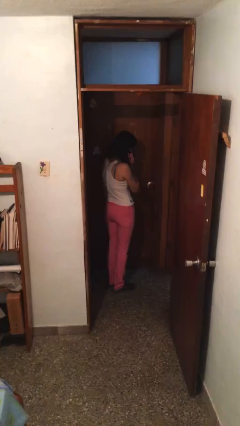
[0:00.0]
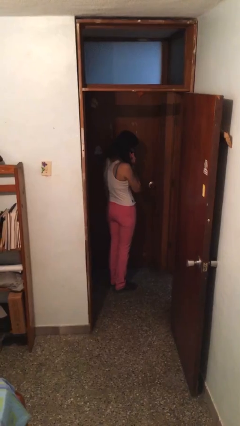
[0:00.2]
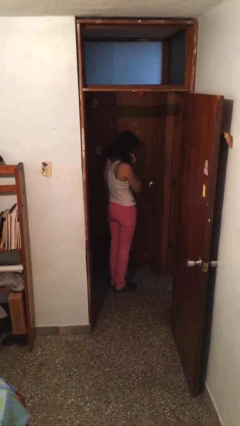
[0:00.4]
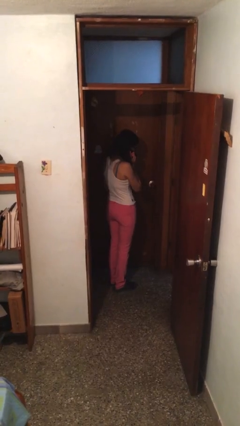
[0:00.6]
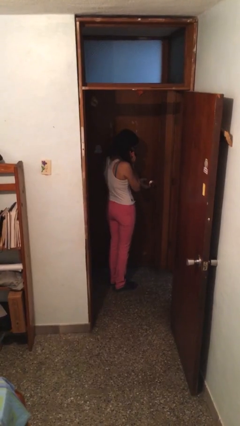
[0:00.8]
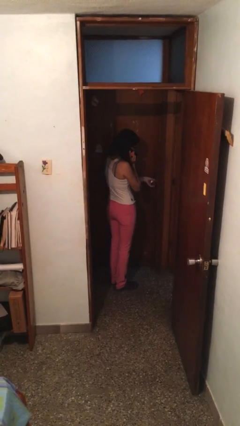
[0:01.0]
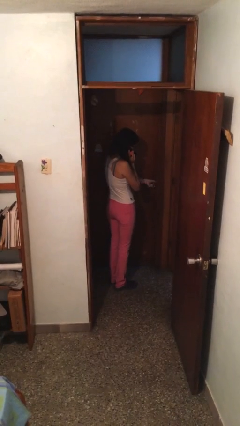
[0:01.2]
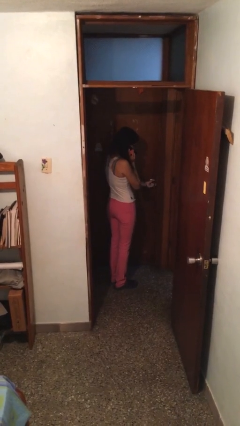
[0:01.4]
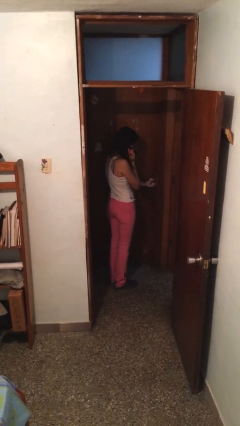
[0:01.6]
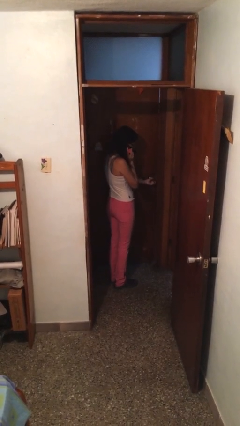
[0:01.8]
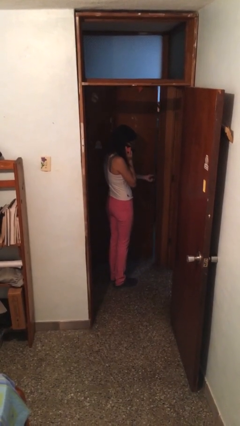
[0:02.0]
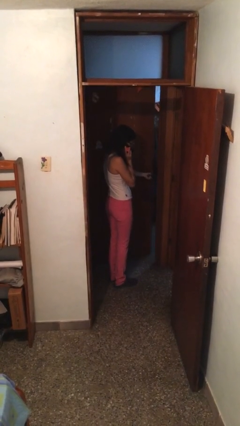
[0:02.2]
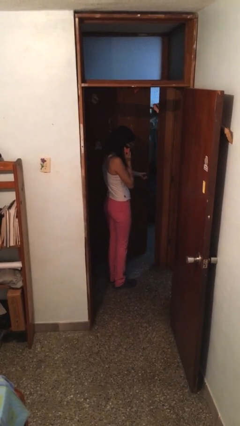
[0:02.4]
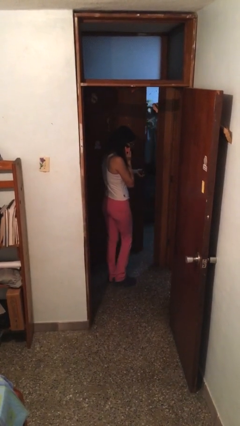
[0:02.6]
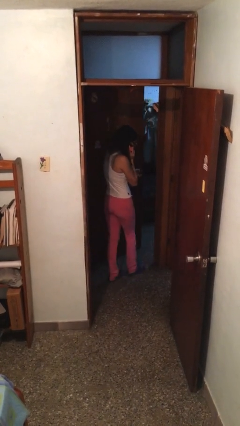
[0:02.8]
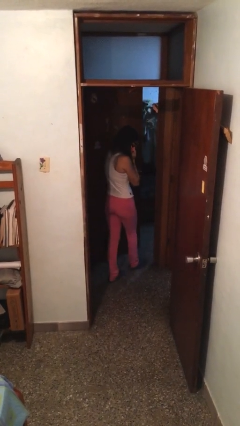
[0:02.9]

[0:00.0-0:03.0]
person opens facility door

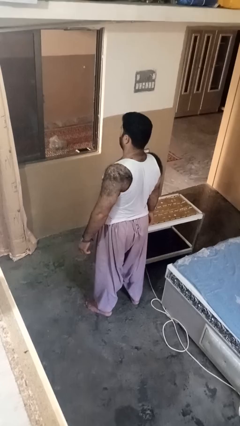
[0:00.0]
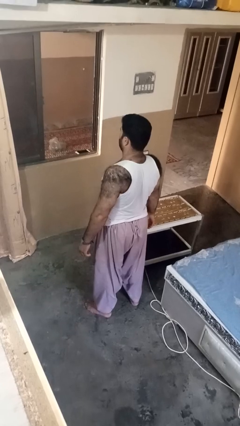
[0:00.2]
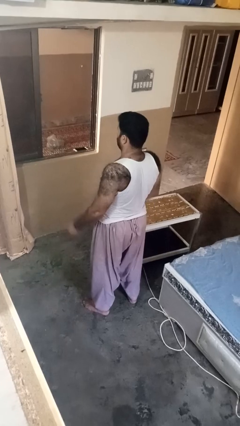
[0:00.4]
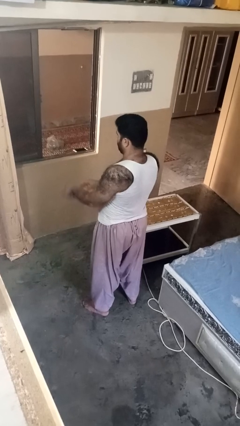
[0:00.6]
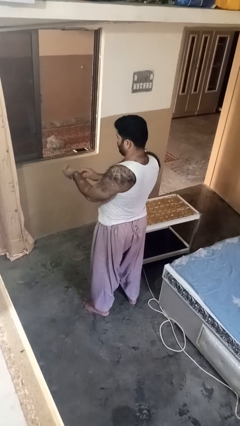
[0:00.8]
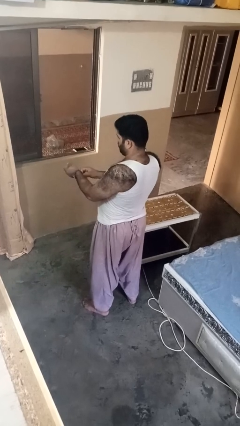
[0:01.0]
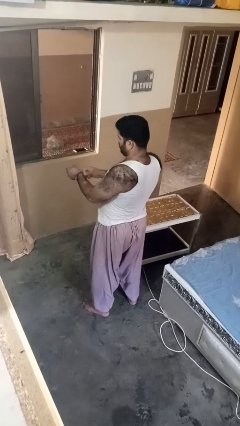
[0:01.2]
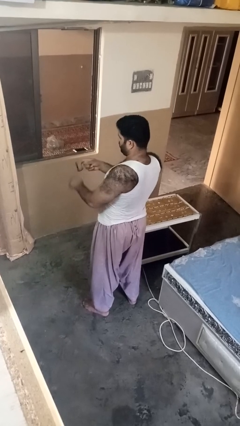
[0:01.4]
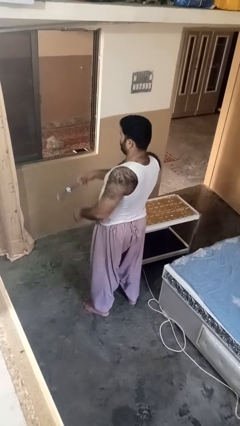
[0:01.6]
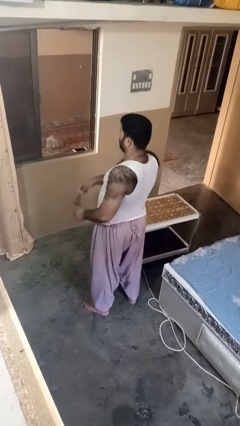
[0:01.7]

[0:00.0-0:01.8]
person takes off wristwatch

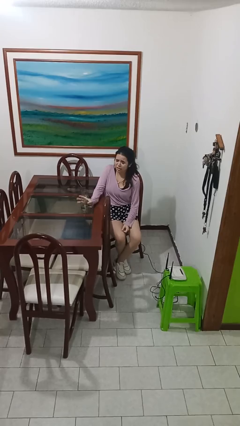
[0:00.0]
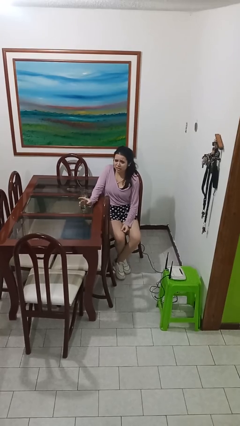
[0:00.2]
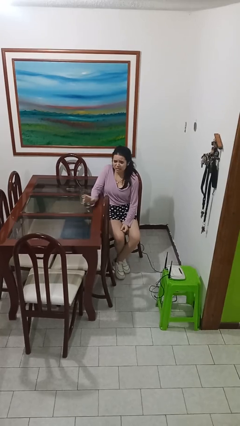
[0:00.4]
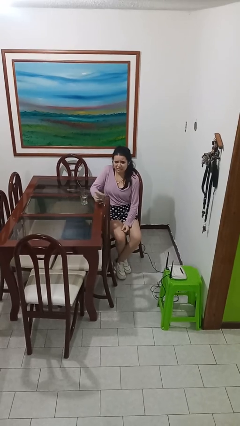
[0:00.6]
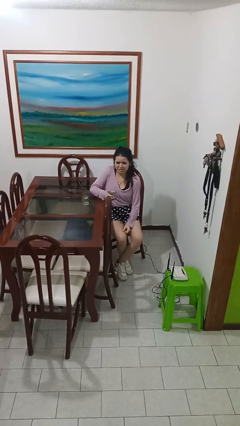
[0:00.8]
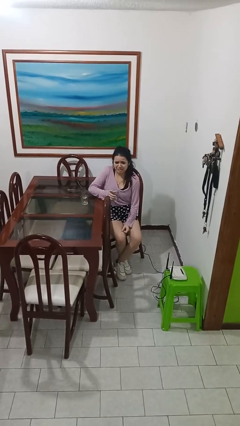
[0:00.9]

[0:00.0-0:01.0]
person picks up object from table

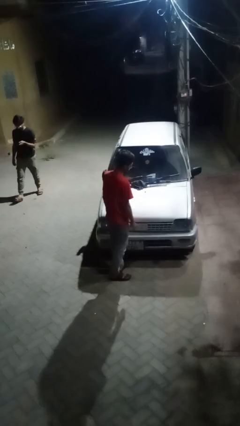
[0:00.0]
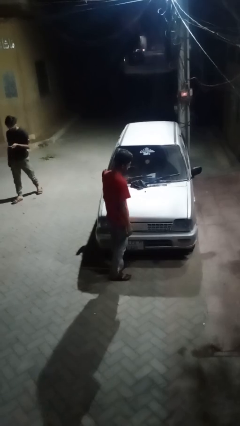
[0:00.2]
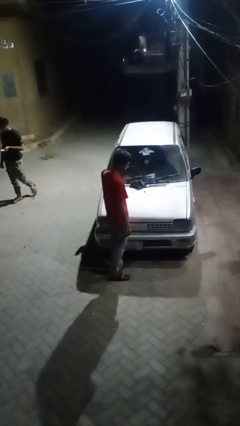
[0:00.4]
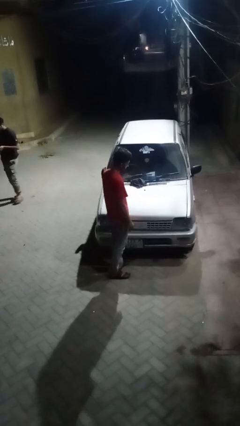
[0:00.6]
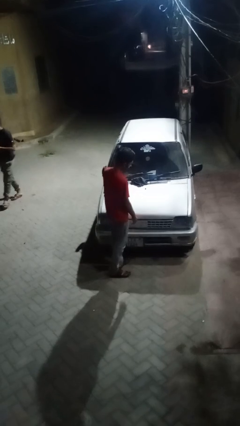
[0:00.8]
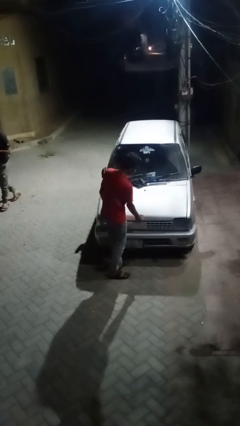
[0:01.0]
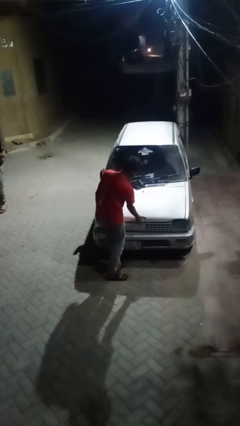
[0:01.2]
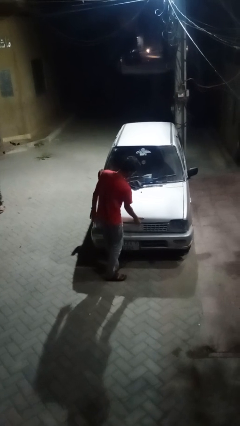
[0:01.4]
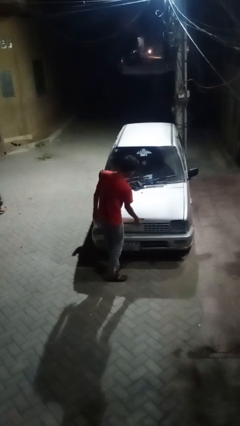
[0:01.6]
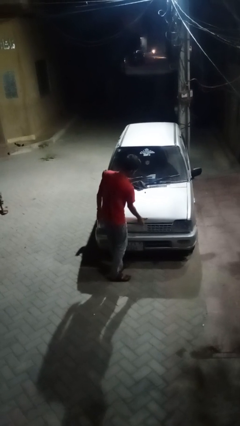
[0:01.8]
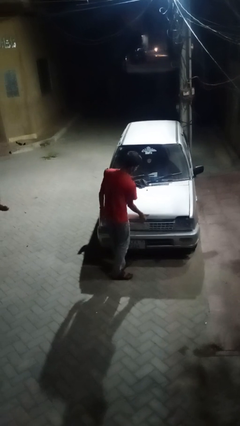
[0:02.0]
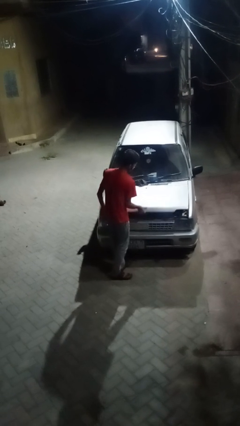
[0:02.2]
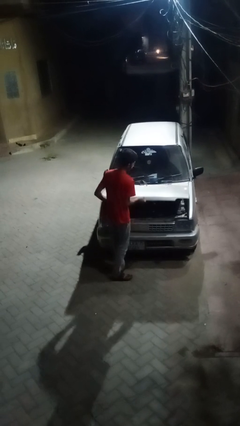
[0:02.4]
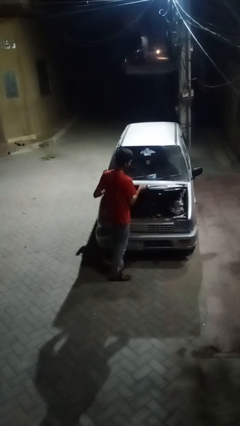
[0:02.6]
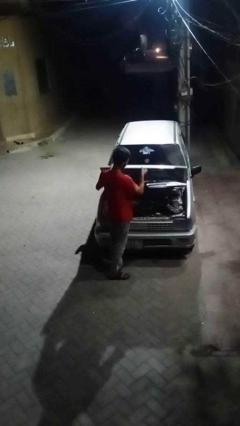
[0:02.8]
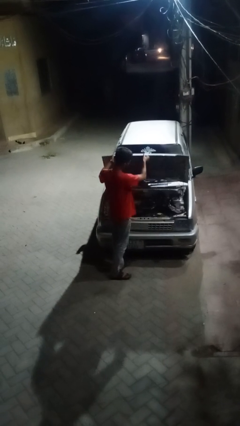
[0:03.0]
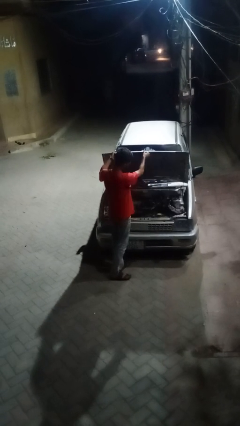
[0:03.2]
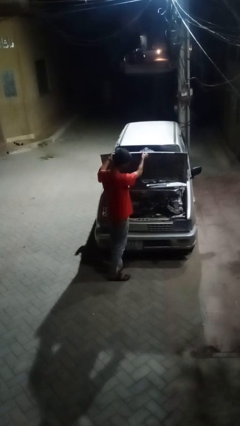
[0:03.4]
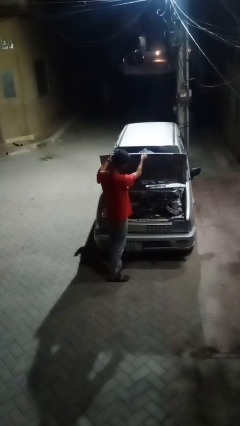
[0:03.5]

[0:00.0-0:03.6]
person opens car hood

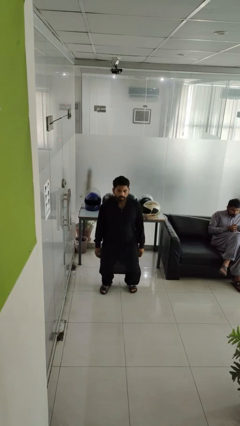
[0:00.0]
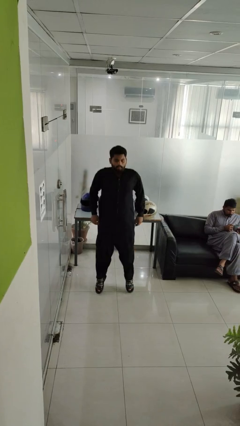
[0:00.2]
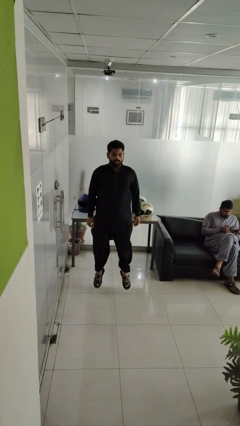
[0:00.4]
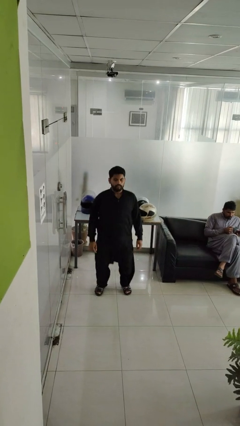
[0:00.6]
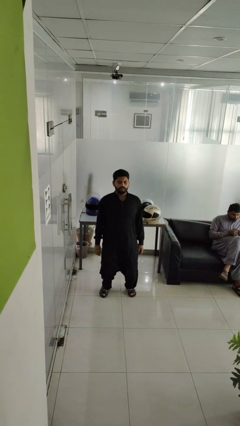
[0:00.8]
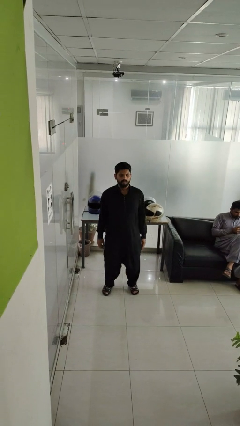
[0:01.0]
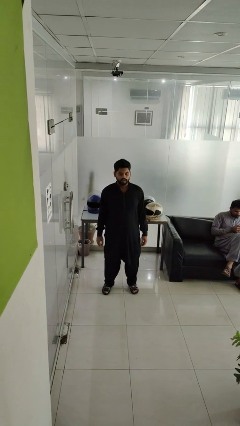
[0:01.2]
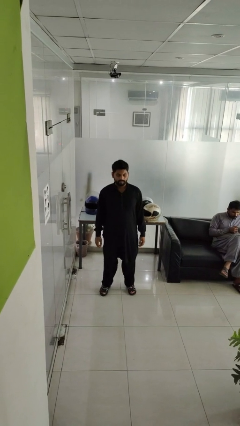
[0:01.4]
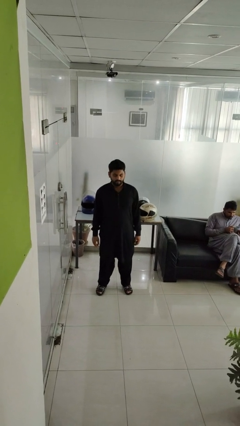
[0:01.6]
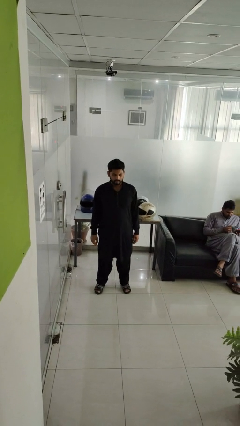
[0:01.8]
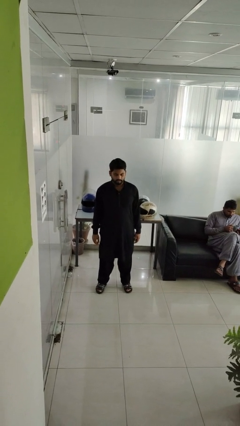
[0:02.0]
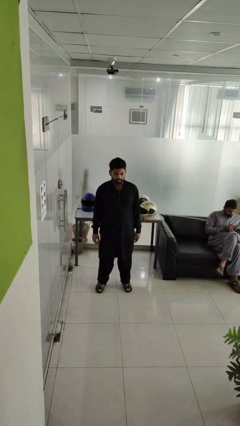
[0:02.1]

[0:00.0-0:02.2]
person jumps

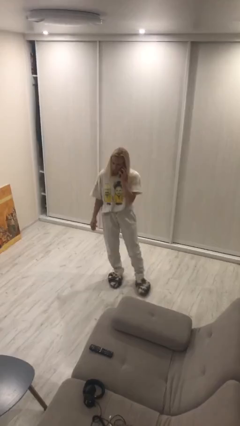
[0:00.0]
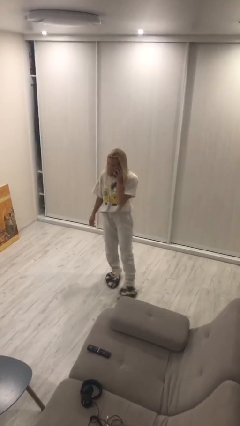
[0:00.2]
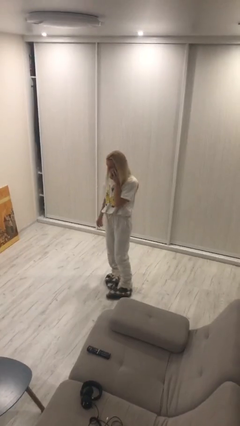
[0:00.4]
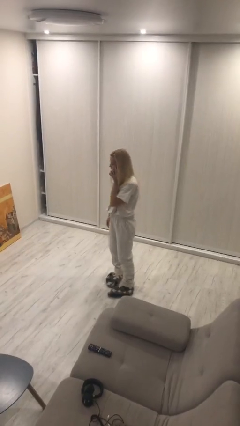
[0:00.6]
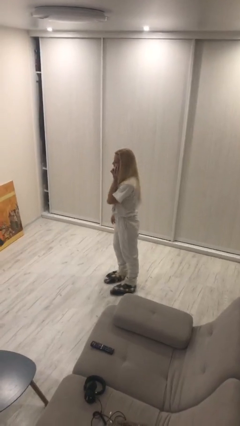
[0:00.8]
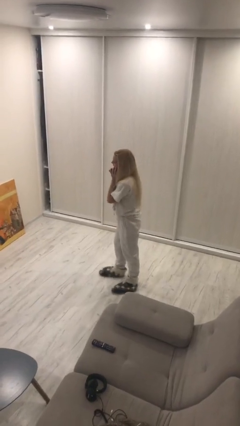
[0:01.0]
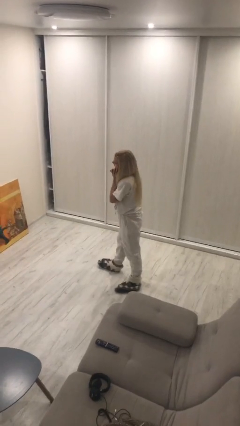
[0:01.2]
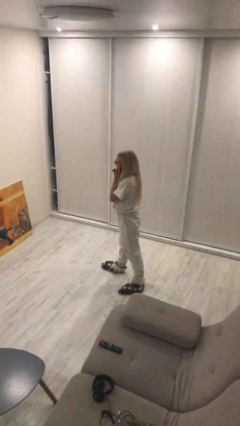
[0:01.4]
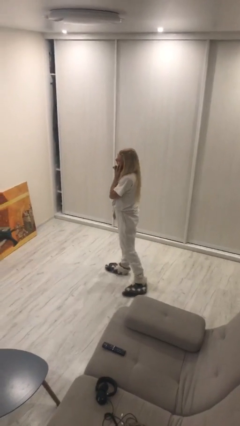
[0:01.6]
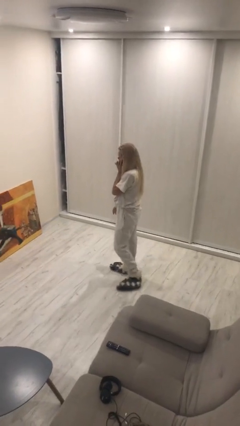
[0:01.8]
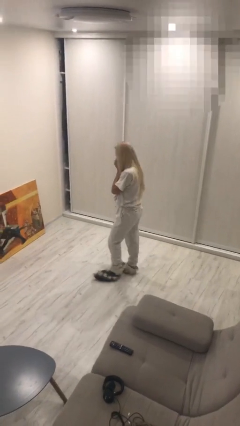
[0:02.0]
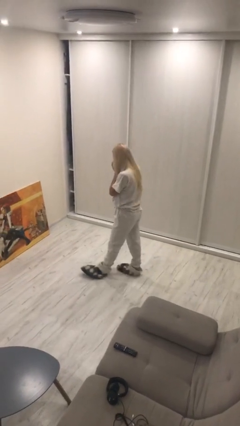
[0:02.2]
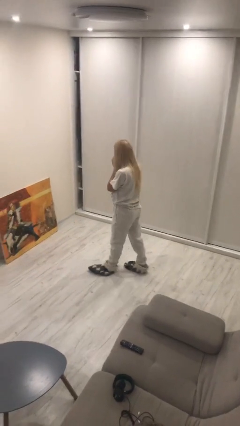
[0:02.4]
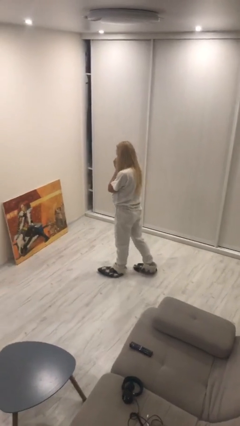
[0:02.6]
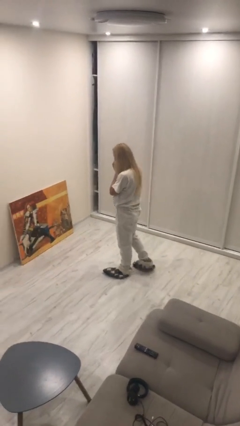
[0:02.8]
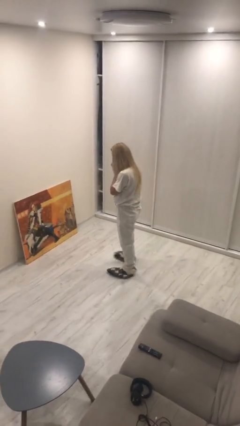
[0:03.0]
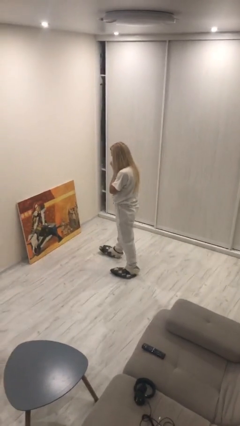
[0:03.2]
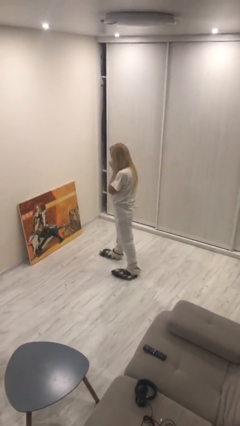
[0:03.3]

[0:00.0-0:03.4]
person talks on phone

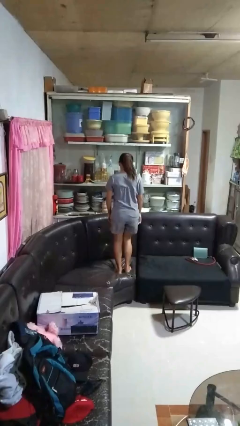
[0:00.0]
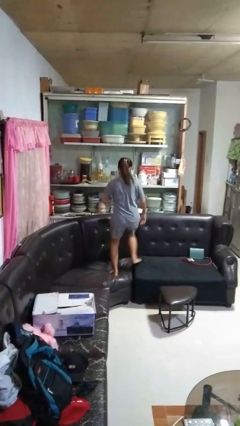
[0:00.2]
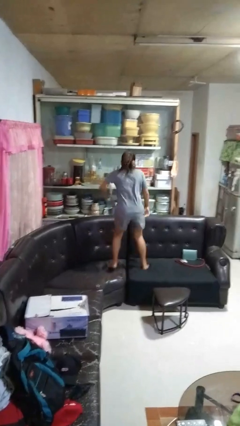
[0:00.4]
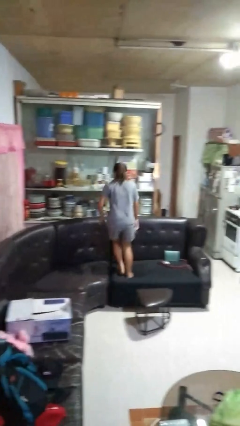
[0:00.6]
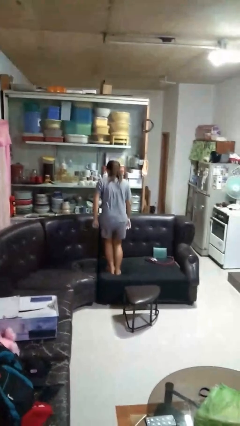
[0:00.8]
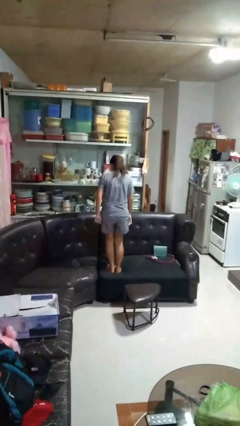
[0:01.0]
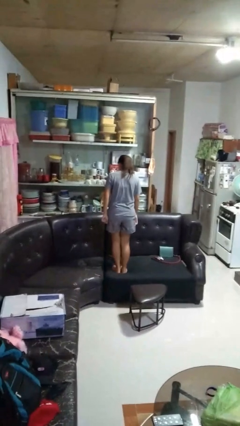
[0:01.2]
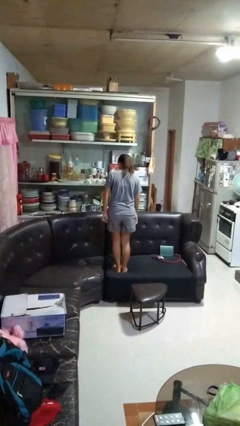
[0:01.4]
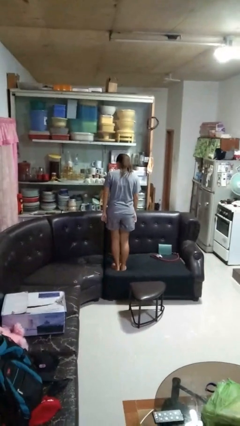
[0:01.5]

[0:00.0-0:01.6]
person jumps on couch

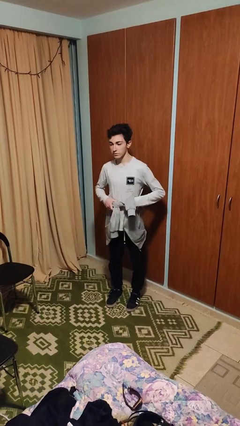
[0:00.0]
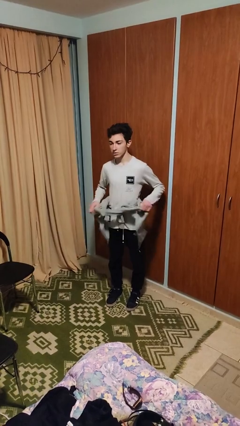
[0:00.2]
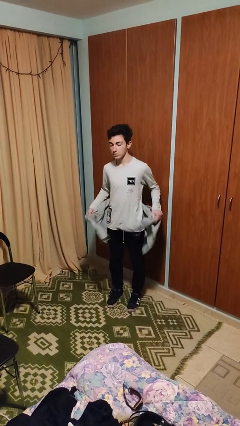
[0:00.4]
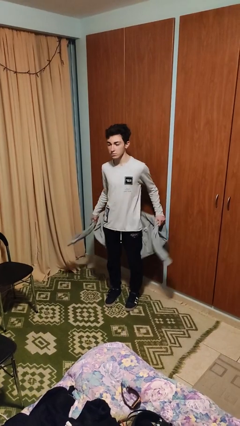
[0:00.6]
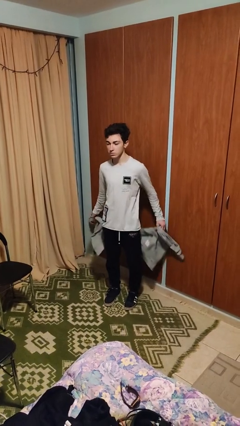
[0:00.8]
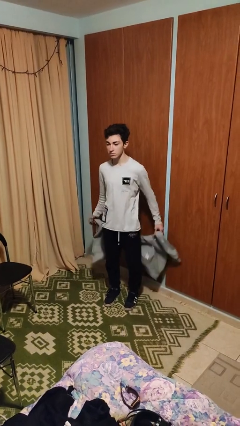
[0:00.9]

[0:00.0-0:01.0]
person unties jacket around waist
